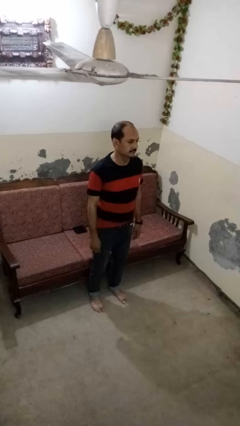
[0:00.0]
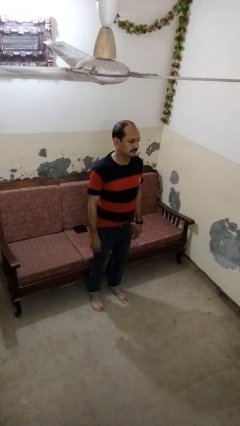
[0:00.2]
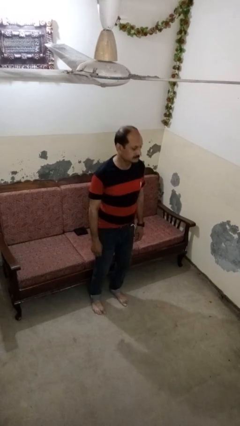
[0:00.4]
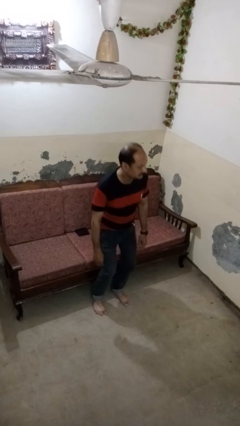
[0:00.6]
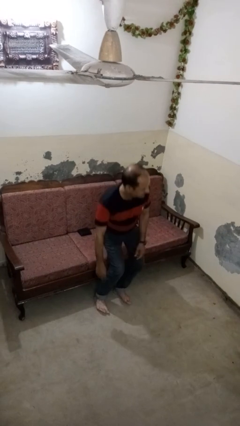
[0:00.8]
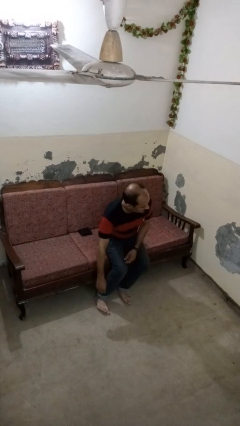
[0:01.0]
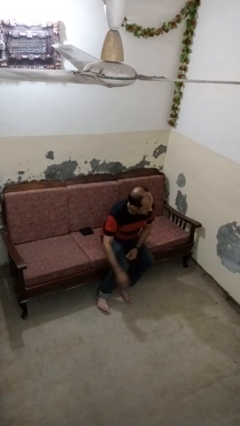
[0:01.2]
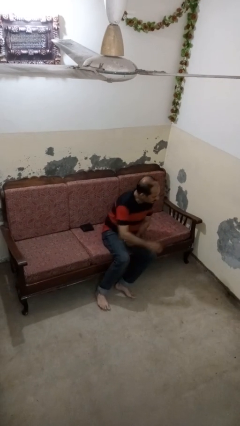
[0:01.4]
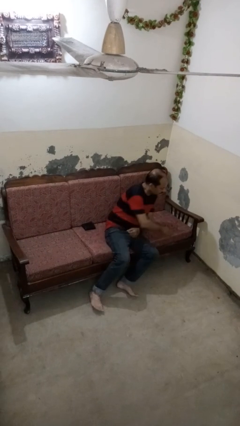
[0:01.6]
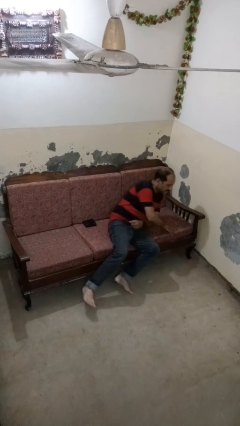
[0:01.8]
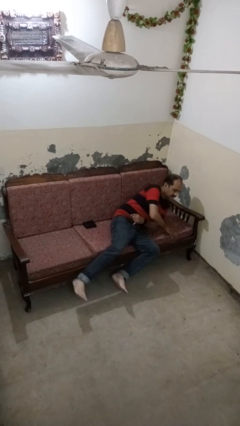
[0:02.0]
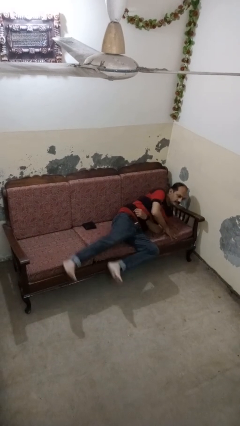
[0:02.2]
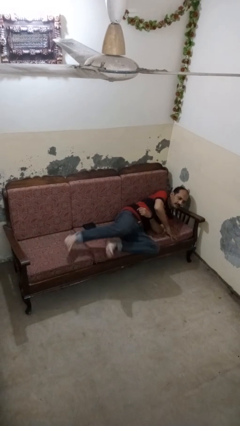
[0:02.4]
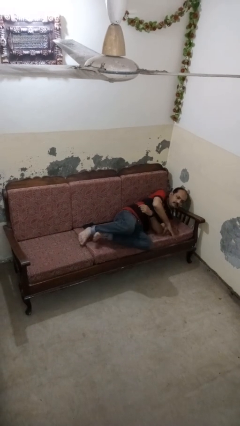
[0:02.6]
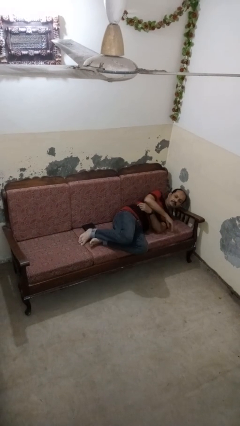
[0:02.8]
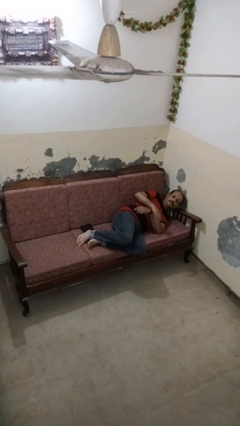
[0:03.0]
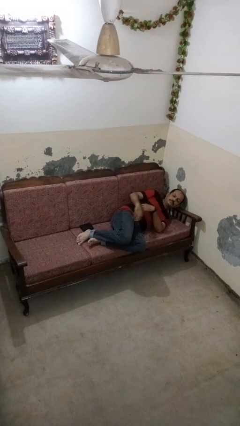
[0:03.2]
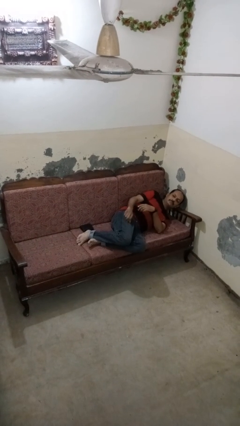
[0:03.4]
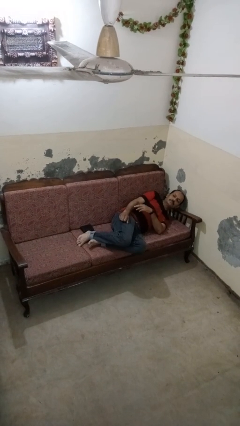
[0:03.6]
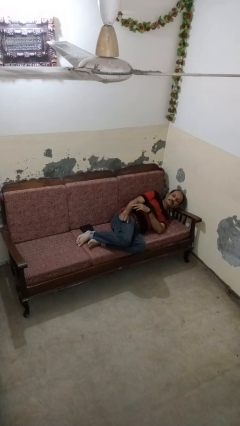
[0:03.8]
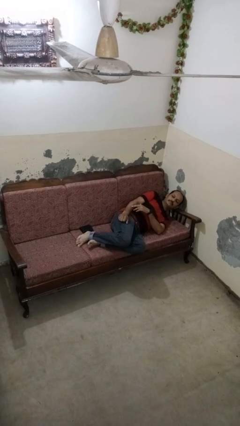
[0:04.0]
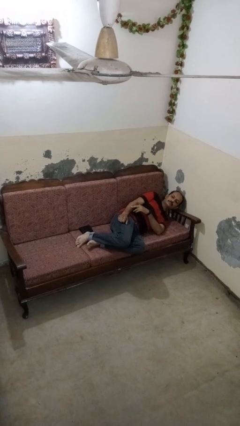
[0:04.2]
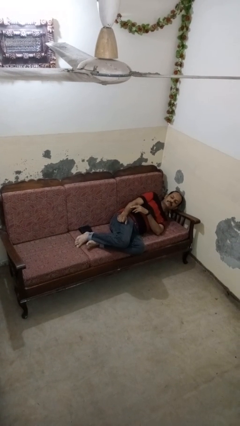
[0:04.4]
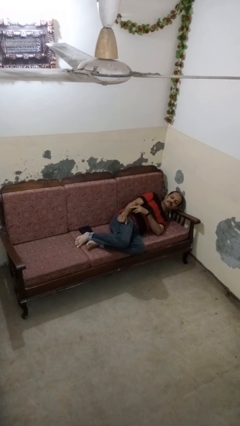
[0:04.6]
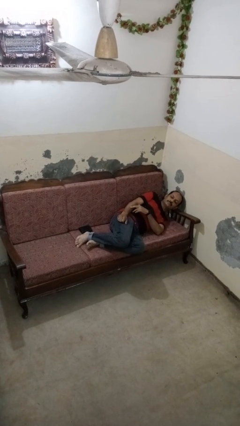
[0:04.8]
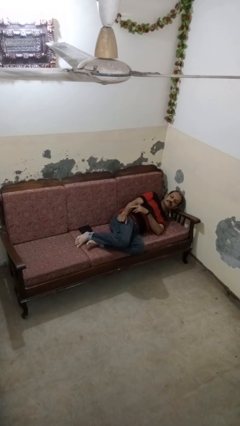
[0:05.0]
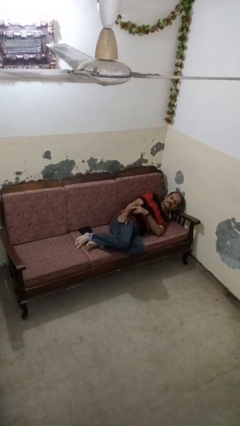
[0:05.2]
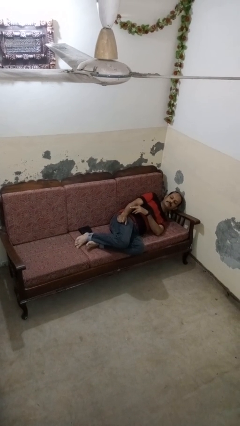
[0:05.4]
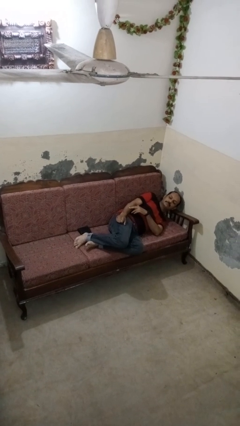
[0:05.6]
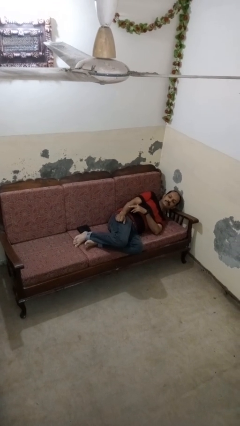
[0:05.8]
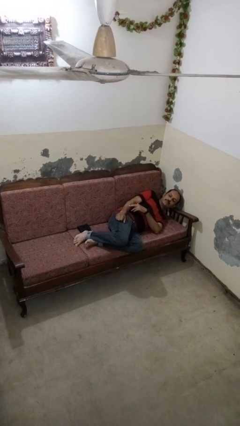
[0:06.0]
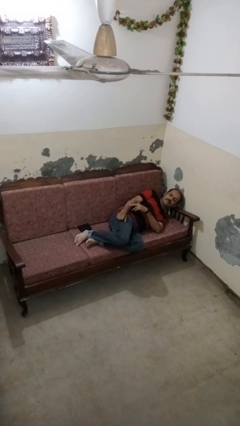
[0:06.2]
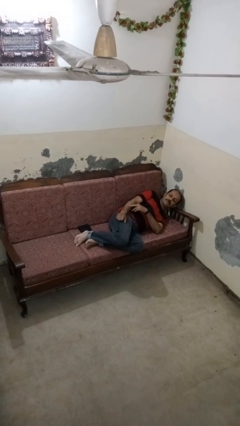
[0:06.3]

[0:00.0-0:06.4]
person lies down on couch

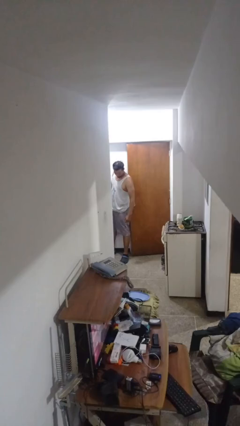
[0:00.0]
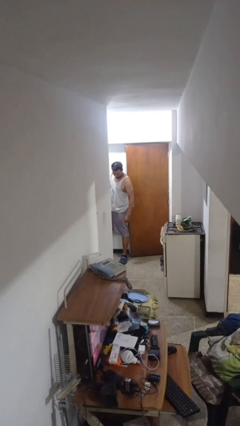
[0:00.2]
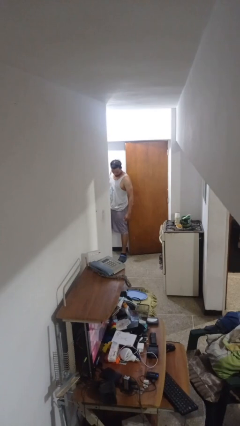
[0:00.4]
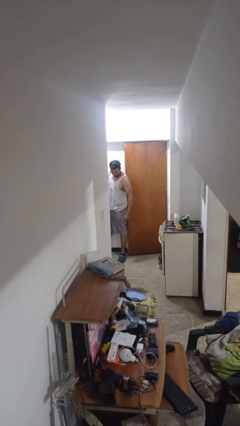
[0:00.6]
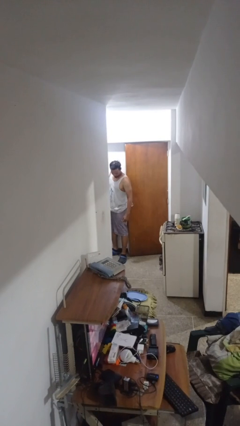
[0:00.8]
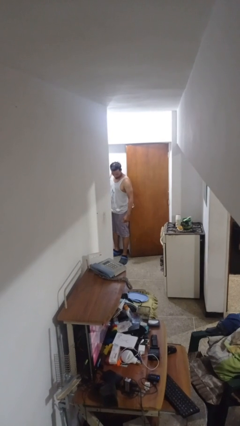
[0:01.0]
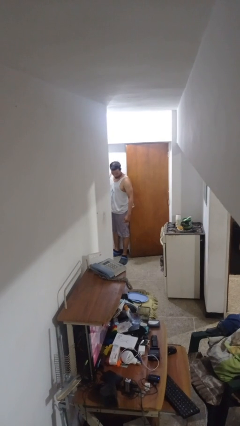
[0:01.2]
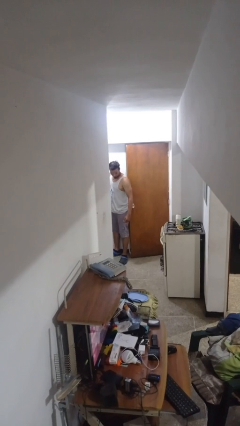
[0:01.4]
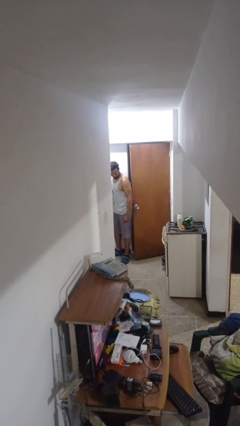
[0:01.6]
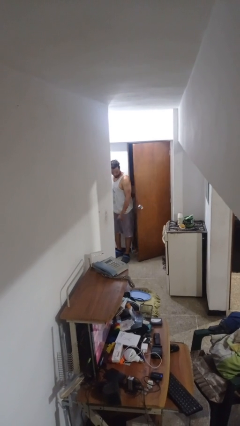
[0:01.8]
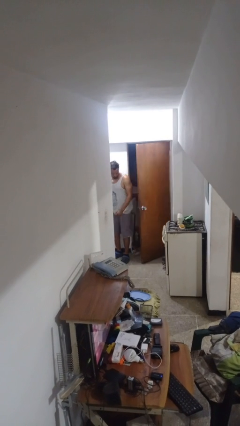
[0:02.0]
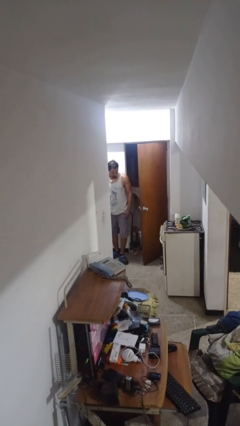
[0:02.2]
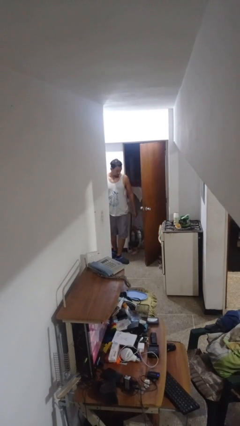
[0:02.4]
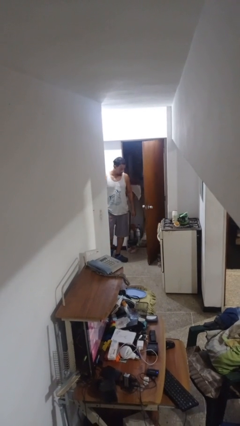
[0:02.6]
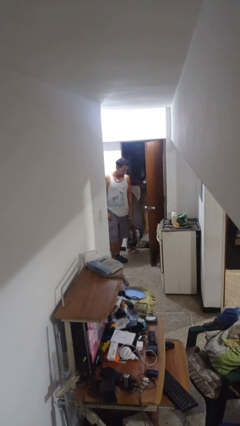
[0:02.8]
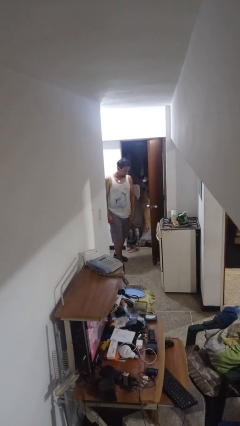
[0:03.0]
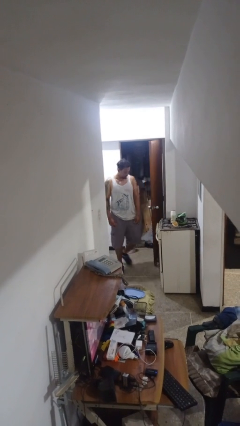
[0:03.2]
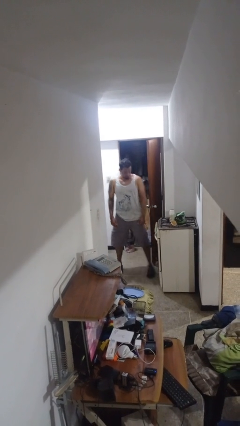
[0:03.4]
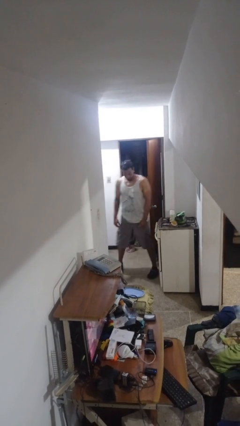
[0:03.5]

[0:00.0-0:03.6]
person opens facility door

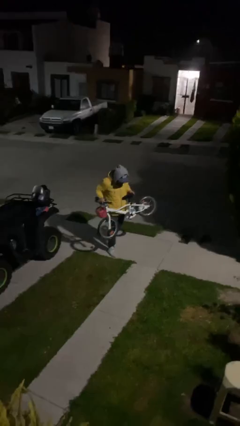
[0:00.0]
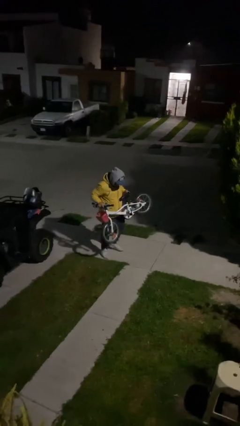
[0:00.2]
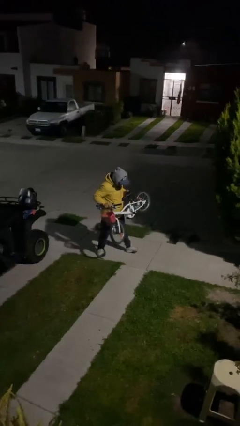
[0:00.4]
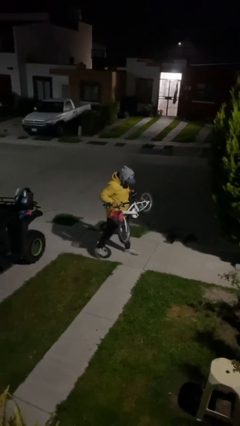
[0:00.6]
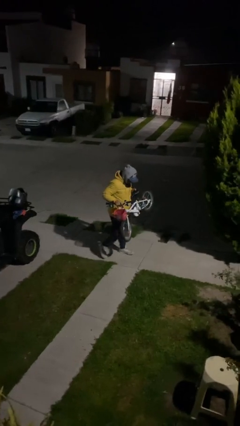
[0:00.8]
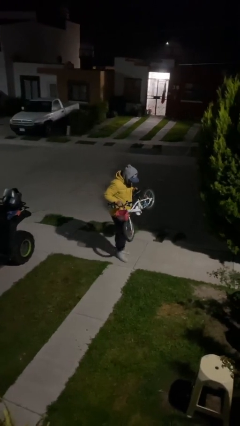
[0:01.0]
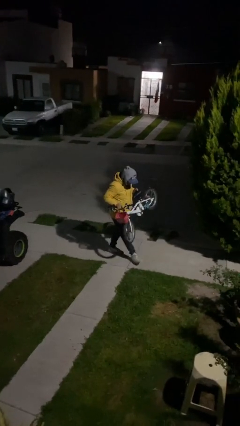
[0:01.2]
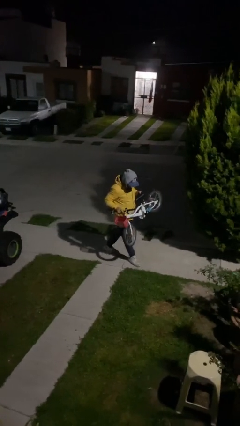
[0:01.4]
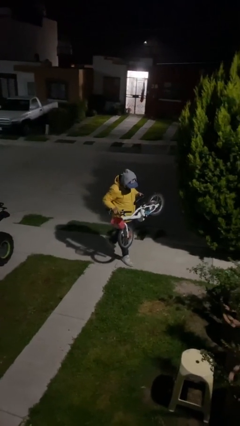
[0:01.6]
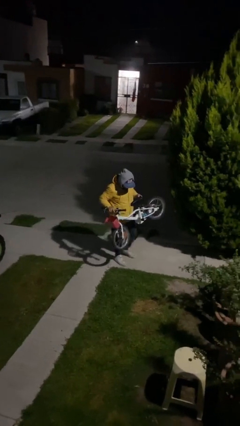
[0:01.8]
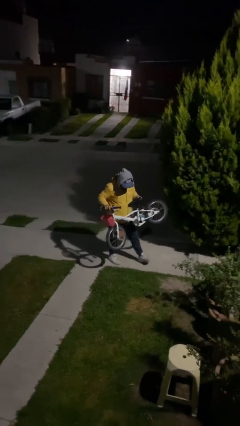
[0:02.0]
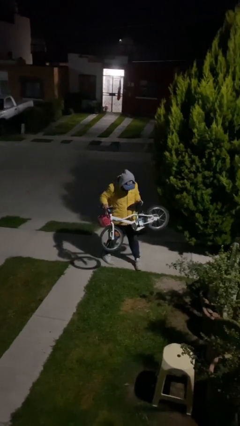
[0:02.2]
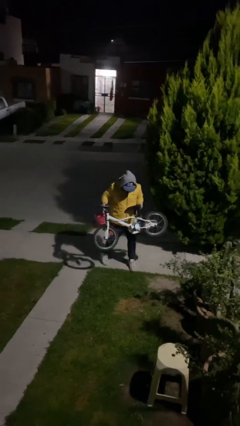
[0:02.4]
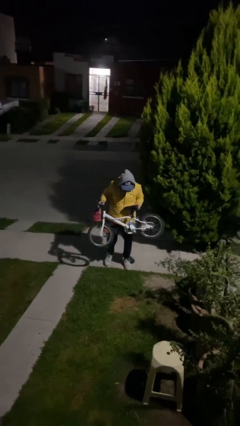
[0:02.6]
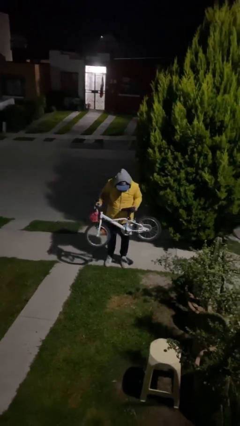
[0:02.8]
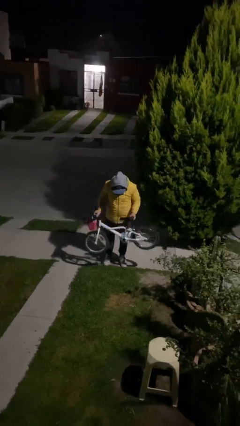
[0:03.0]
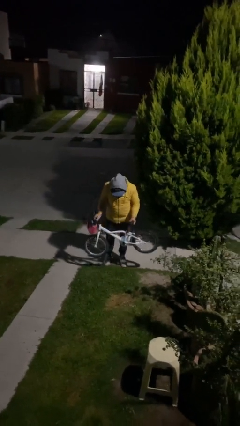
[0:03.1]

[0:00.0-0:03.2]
person carries heavy object

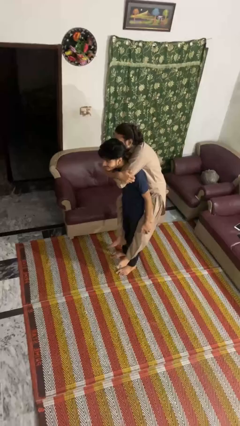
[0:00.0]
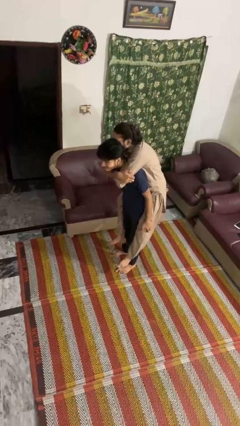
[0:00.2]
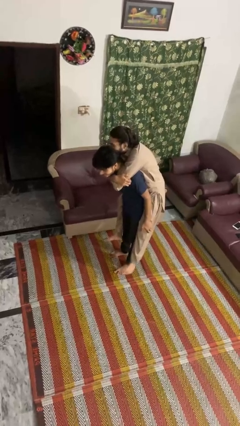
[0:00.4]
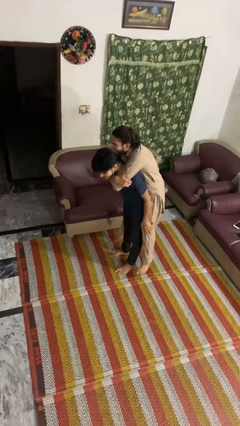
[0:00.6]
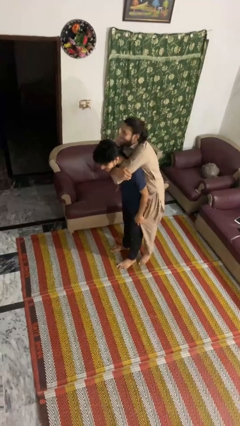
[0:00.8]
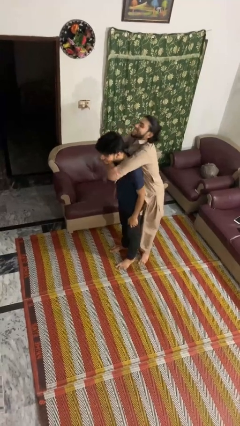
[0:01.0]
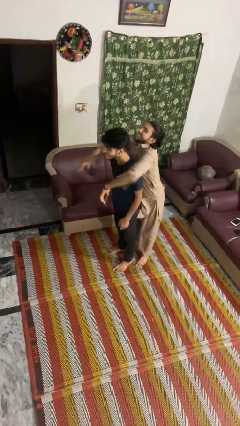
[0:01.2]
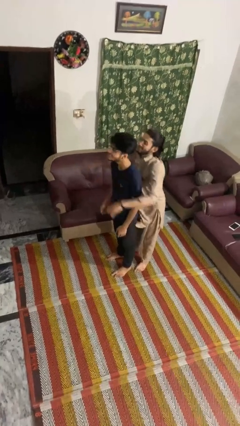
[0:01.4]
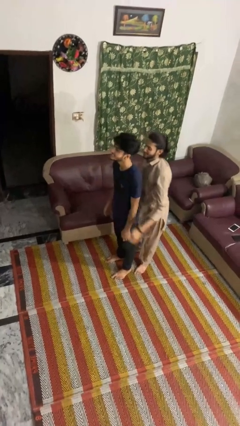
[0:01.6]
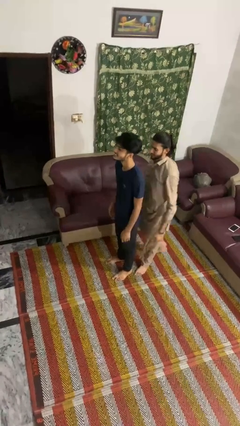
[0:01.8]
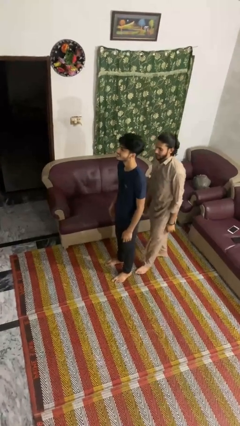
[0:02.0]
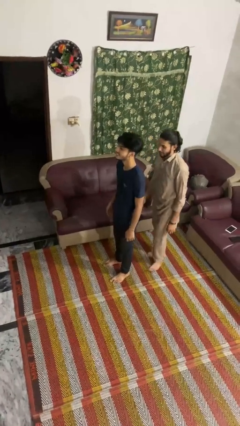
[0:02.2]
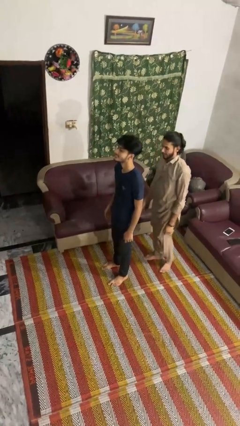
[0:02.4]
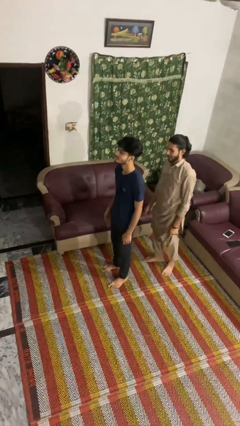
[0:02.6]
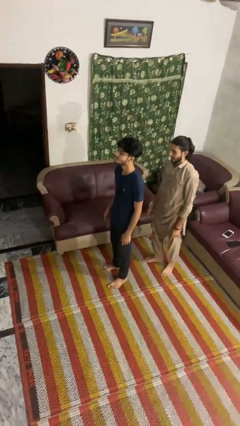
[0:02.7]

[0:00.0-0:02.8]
person puts down person

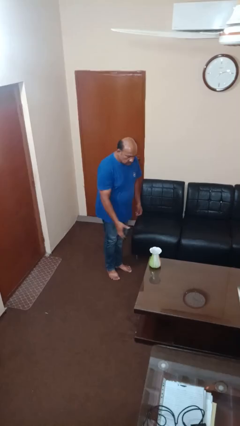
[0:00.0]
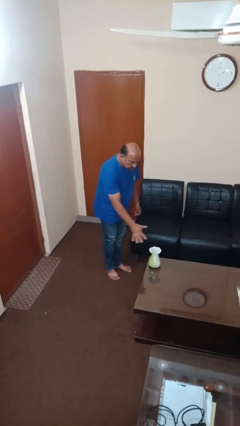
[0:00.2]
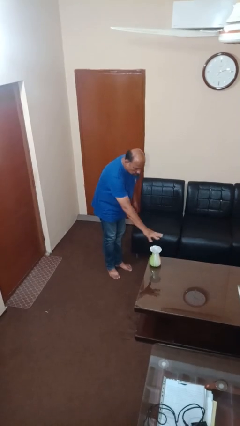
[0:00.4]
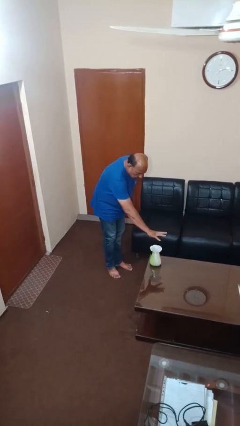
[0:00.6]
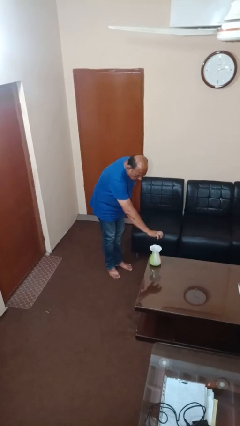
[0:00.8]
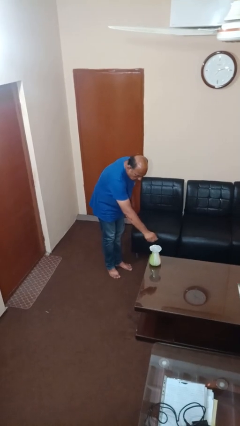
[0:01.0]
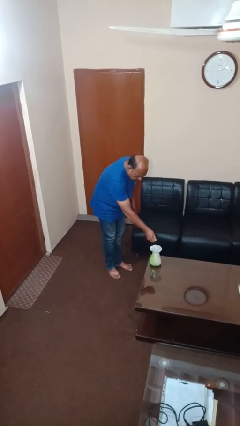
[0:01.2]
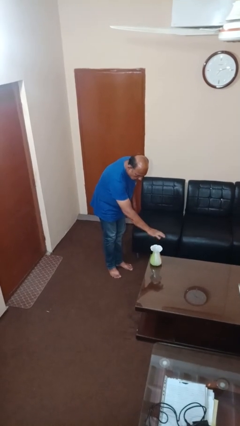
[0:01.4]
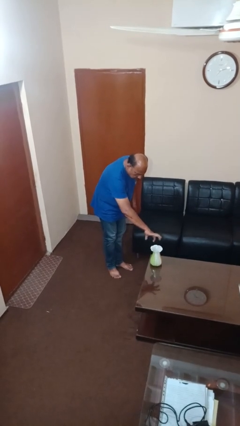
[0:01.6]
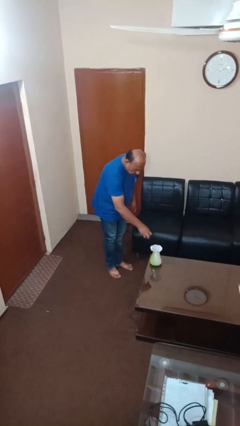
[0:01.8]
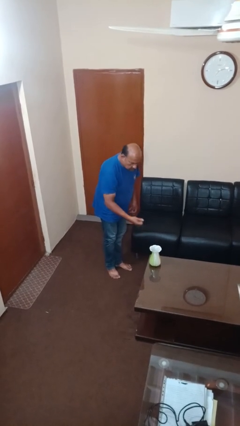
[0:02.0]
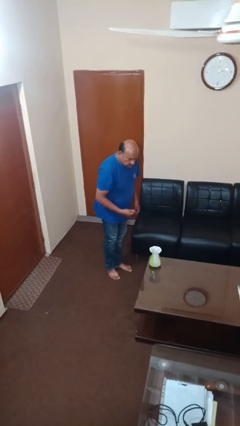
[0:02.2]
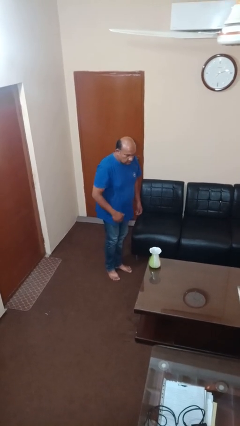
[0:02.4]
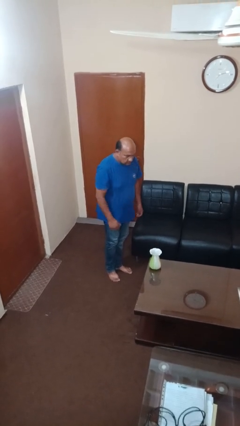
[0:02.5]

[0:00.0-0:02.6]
person waves hand over object
